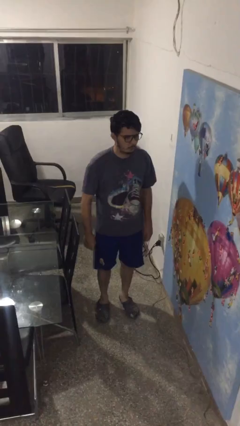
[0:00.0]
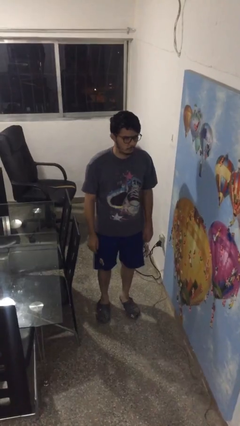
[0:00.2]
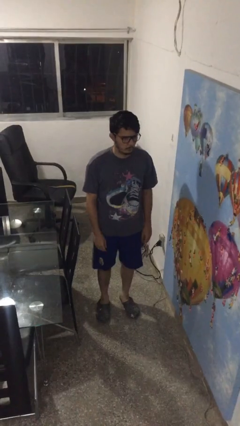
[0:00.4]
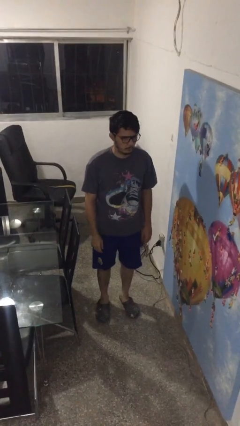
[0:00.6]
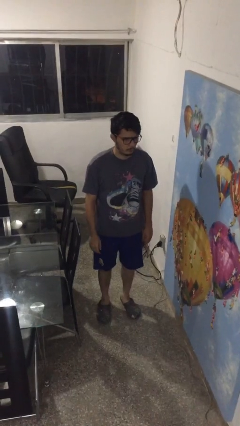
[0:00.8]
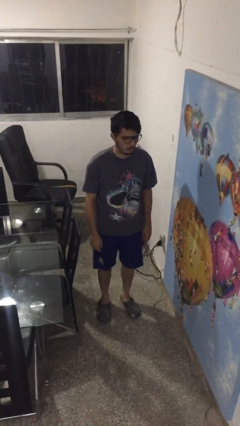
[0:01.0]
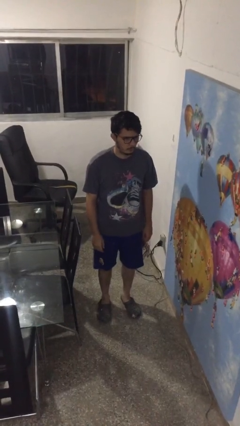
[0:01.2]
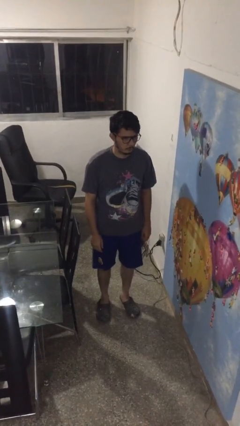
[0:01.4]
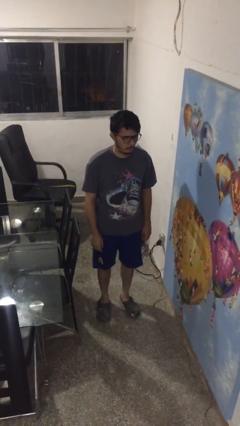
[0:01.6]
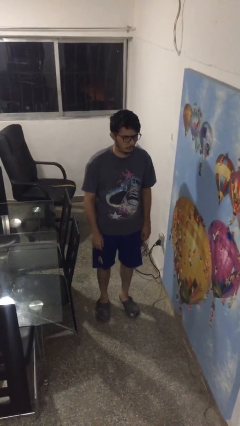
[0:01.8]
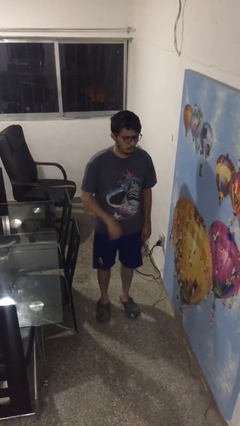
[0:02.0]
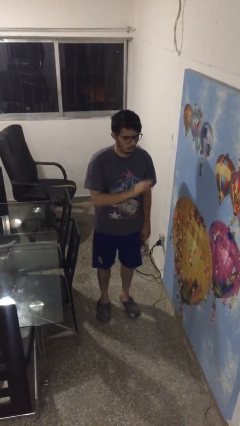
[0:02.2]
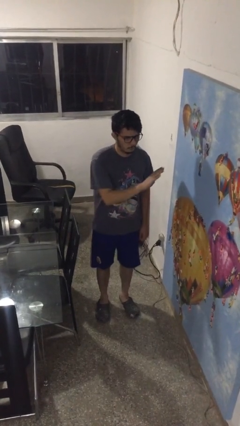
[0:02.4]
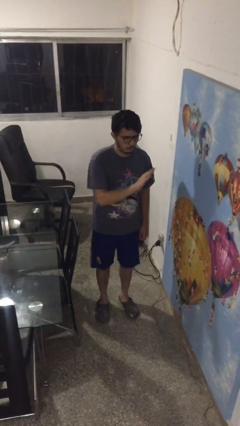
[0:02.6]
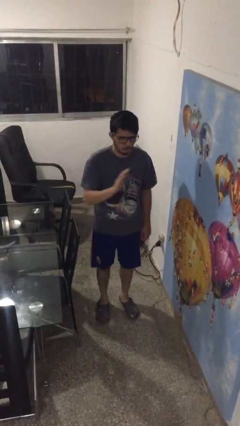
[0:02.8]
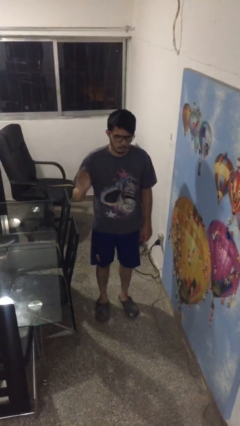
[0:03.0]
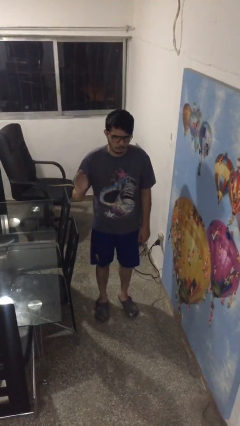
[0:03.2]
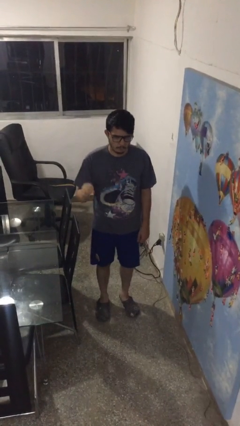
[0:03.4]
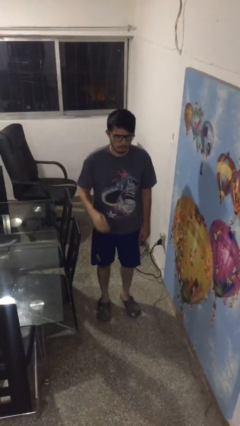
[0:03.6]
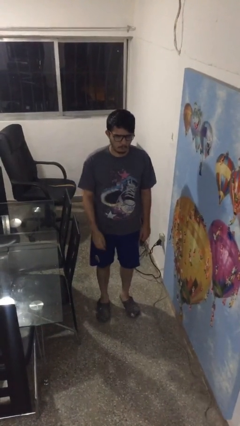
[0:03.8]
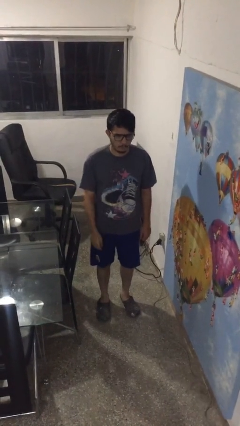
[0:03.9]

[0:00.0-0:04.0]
person gestures swipe right

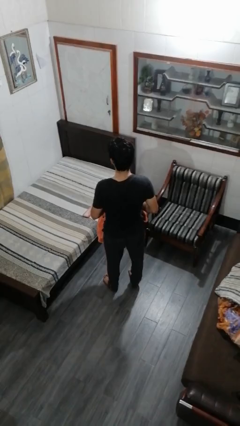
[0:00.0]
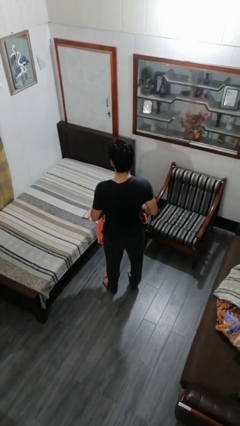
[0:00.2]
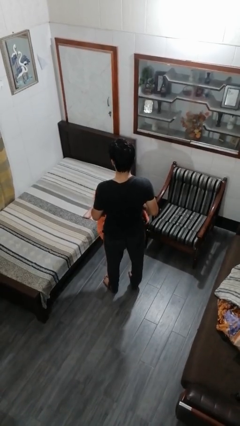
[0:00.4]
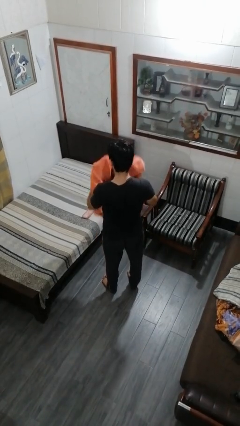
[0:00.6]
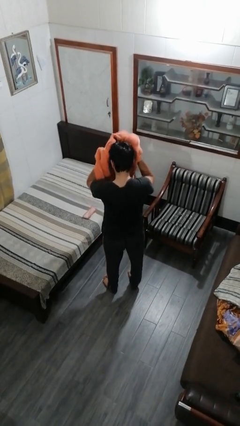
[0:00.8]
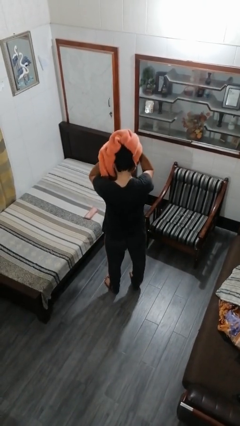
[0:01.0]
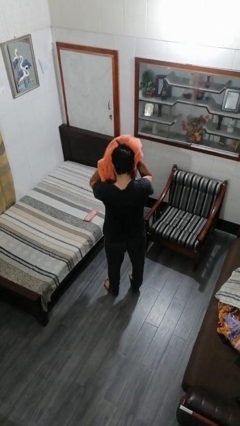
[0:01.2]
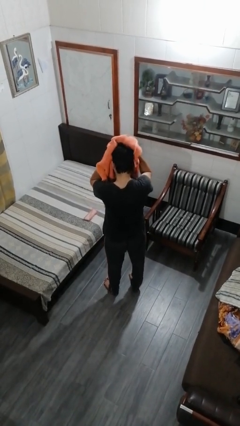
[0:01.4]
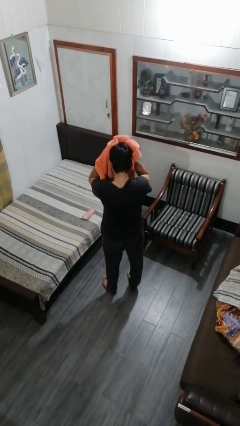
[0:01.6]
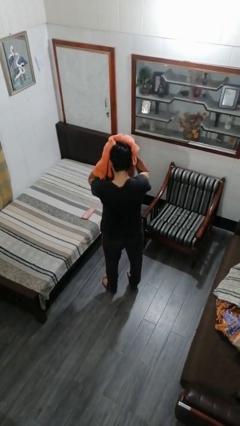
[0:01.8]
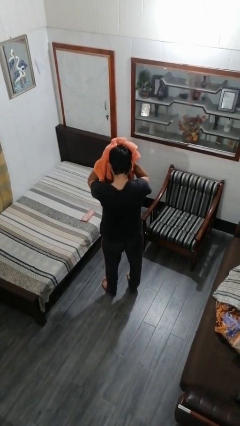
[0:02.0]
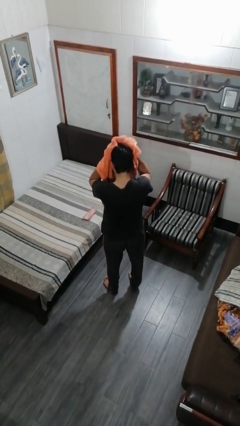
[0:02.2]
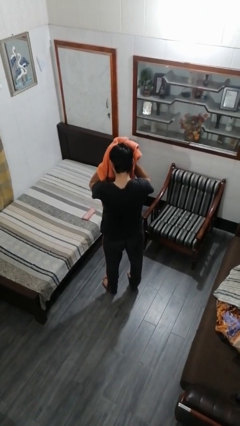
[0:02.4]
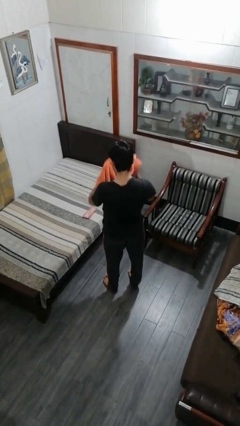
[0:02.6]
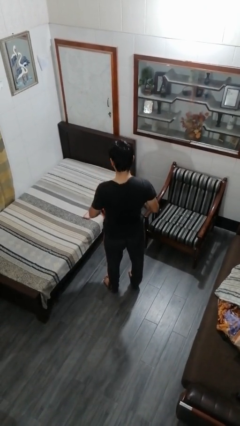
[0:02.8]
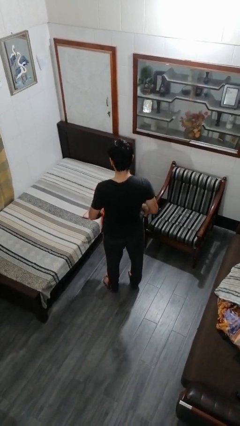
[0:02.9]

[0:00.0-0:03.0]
person dries hair with towel

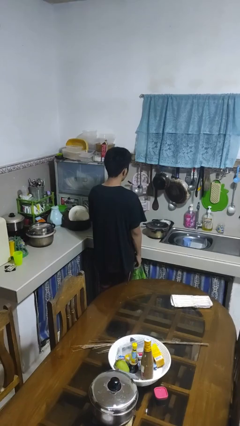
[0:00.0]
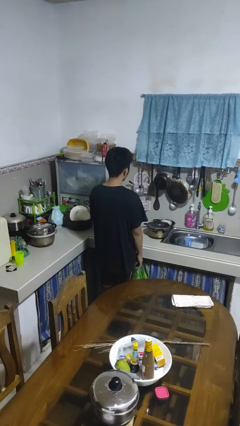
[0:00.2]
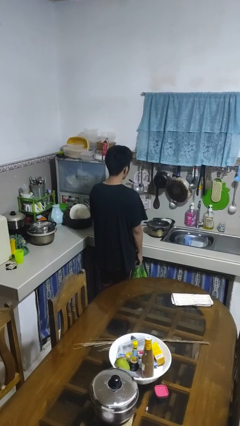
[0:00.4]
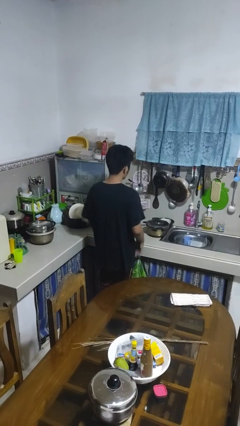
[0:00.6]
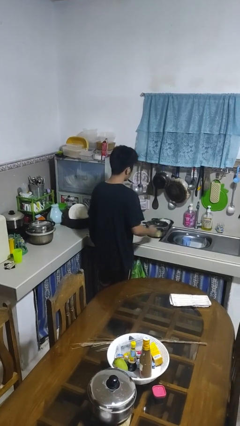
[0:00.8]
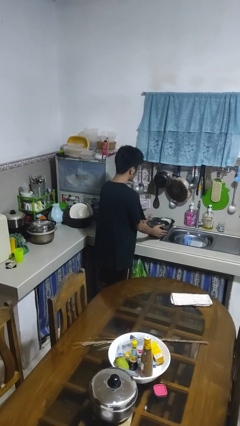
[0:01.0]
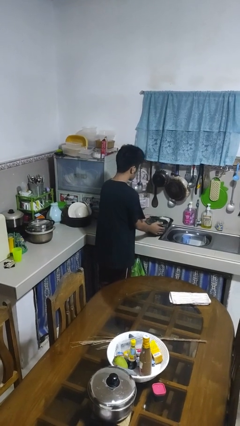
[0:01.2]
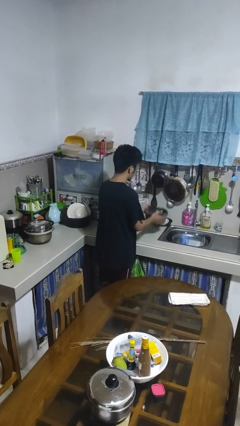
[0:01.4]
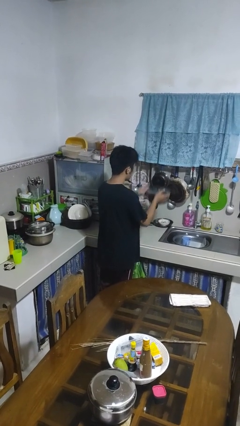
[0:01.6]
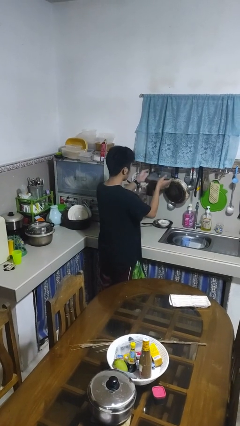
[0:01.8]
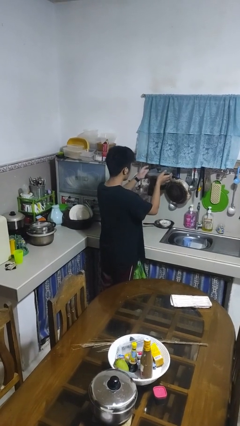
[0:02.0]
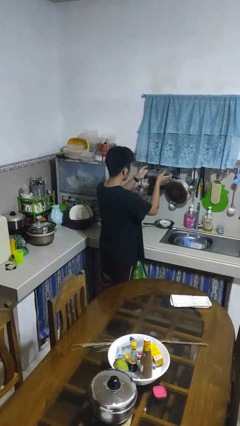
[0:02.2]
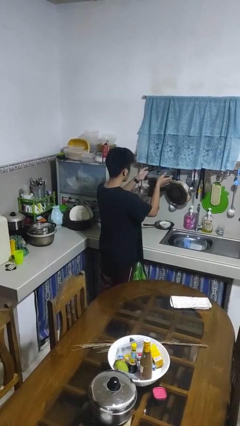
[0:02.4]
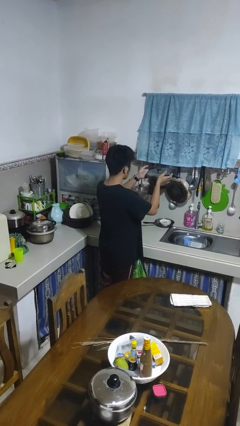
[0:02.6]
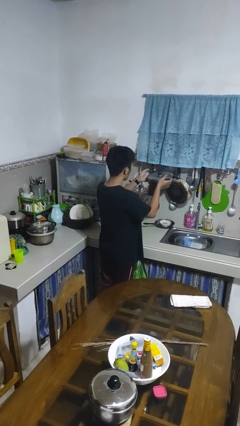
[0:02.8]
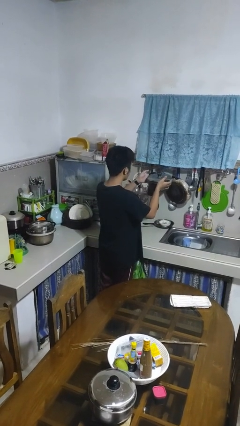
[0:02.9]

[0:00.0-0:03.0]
person picks up object from countertop

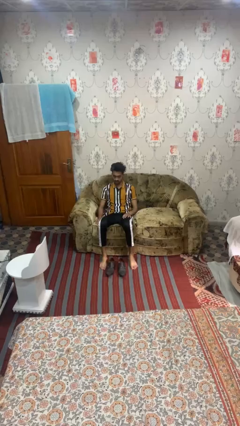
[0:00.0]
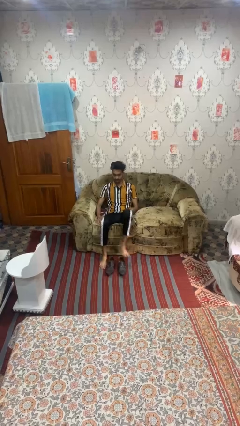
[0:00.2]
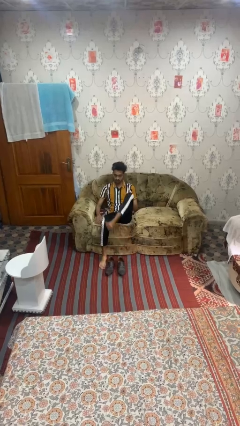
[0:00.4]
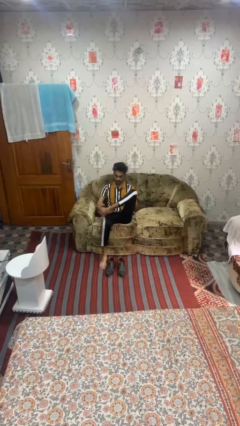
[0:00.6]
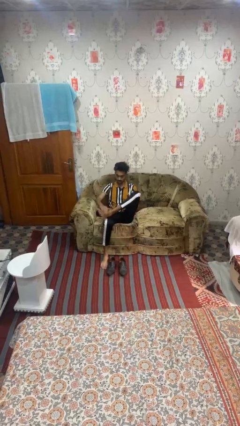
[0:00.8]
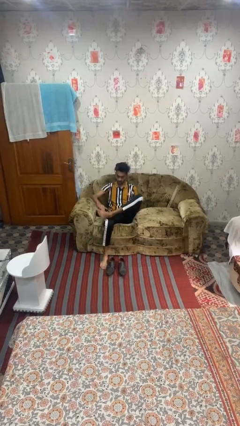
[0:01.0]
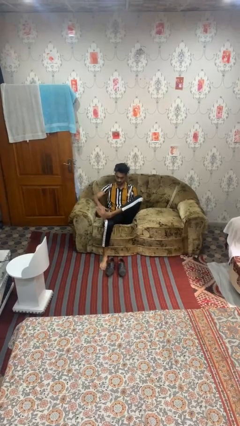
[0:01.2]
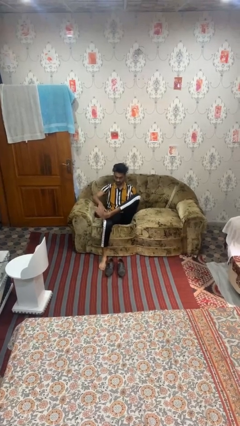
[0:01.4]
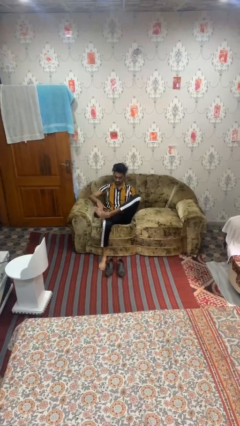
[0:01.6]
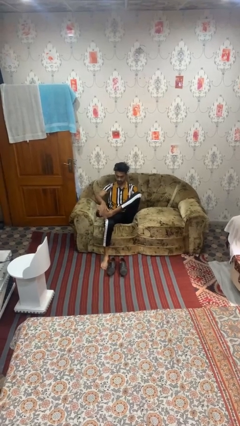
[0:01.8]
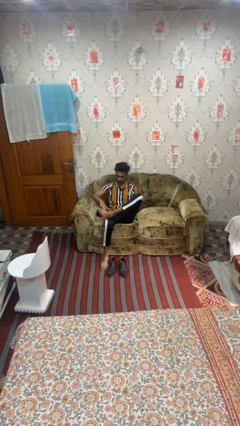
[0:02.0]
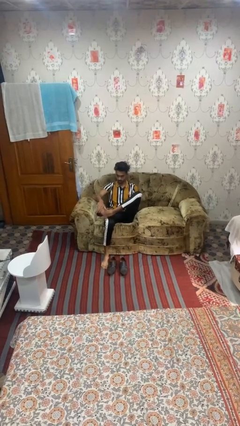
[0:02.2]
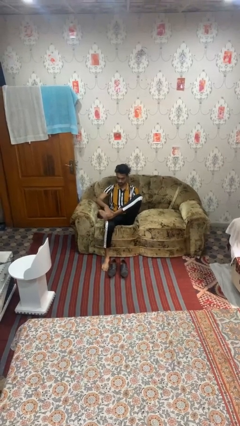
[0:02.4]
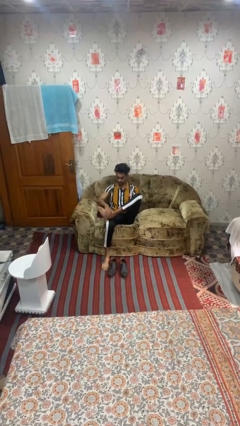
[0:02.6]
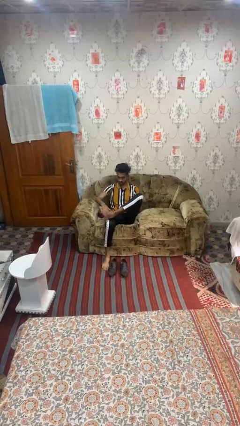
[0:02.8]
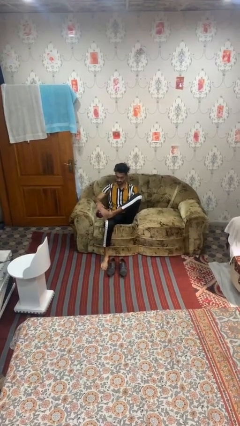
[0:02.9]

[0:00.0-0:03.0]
person rubs foot

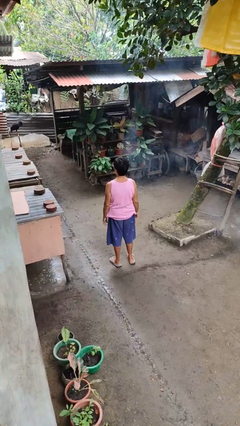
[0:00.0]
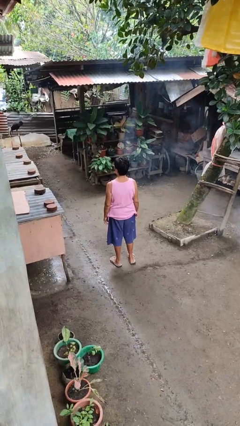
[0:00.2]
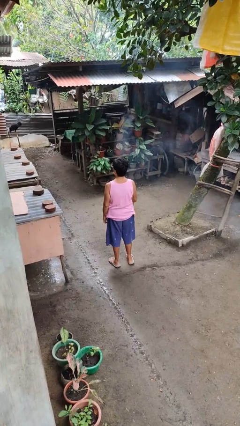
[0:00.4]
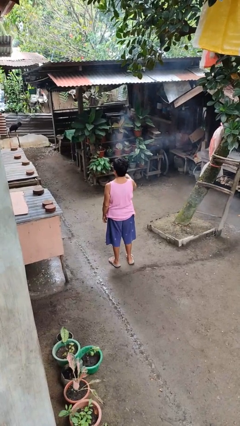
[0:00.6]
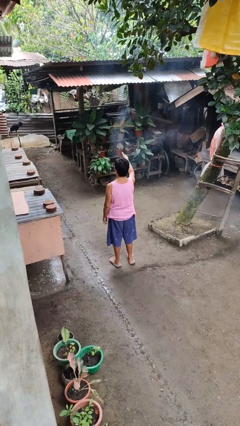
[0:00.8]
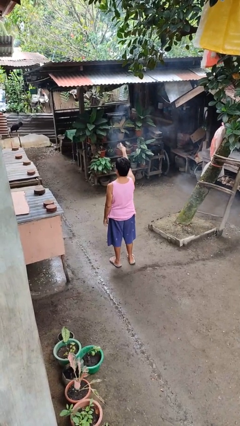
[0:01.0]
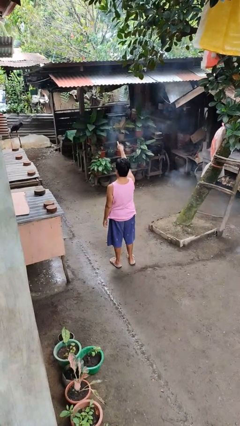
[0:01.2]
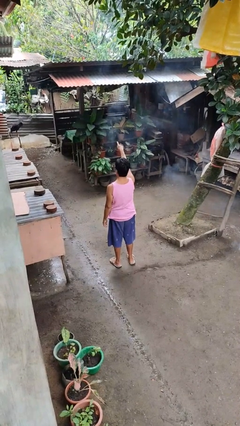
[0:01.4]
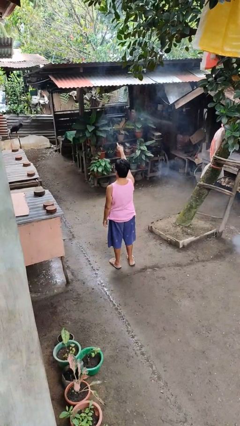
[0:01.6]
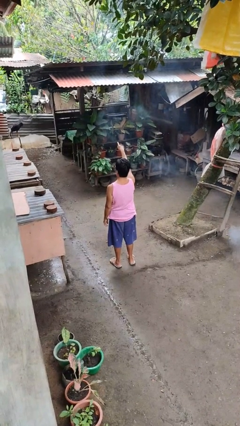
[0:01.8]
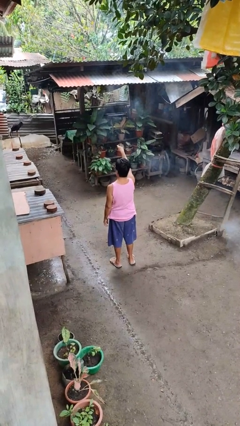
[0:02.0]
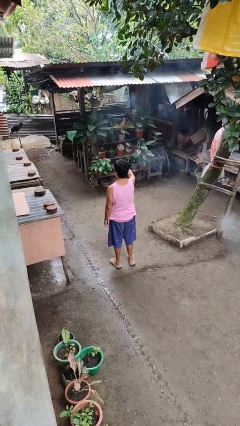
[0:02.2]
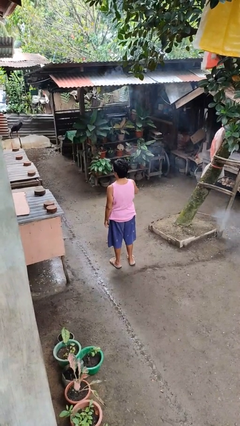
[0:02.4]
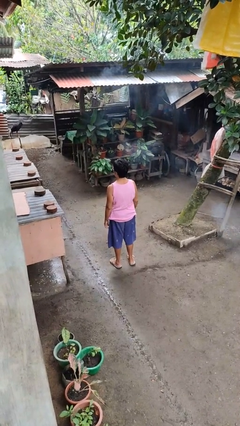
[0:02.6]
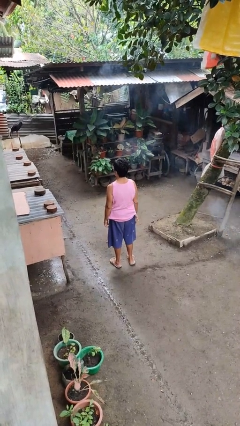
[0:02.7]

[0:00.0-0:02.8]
person points at person

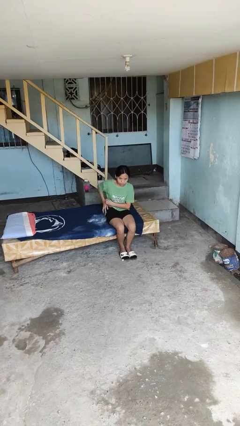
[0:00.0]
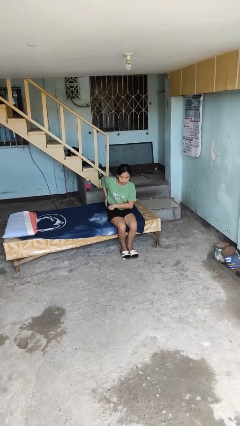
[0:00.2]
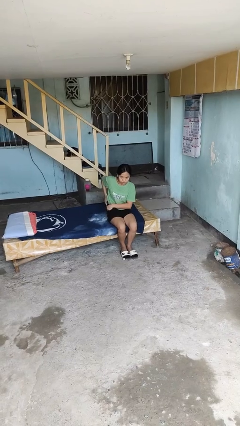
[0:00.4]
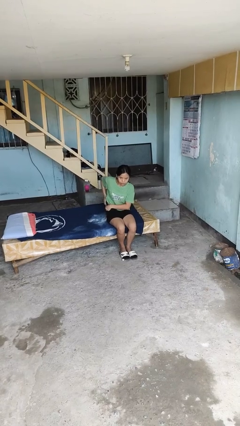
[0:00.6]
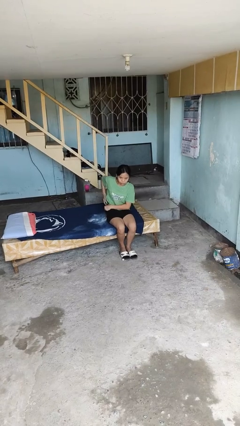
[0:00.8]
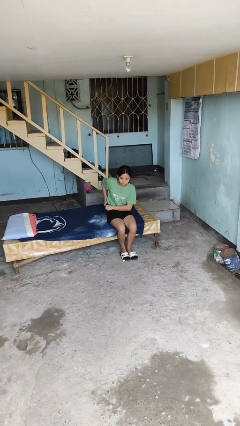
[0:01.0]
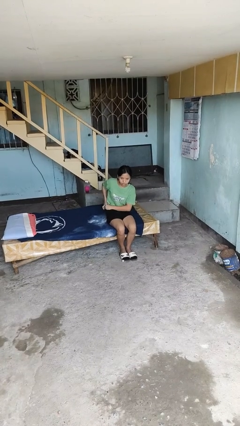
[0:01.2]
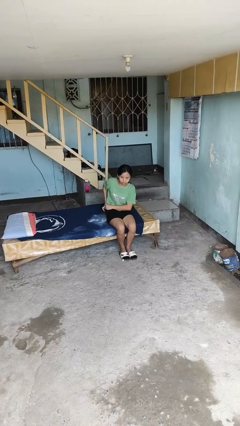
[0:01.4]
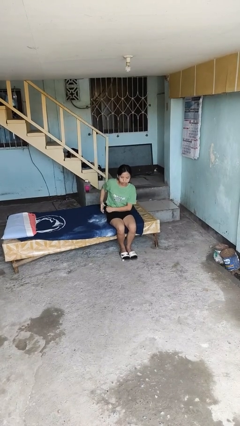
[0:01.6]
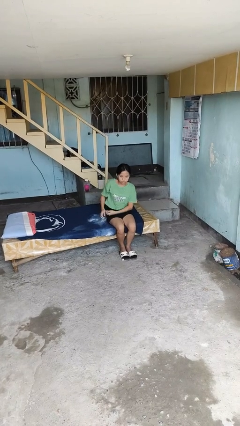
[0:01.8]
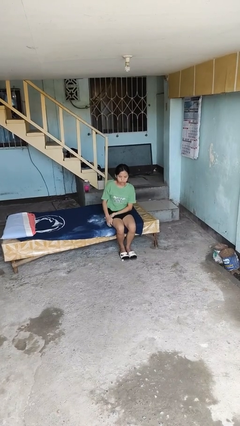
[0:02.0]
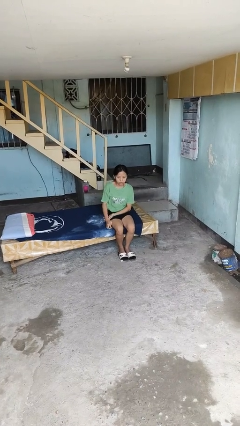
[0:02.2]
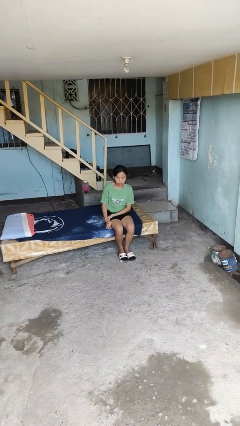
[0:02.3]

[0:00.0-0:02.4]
person puts phone into pocket
